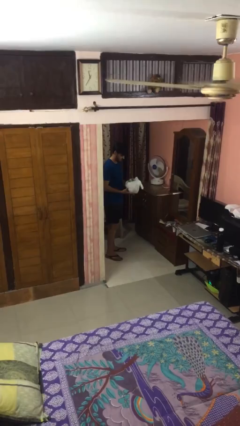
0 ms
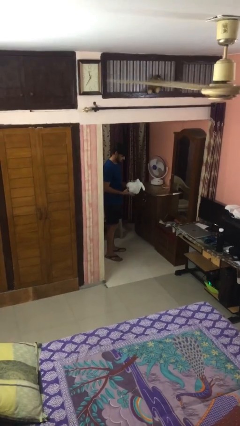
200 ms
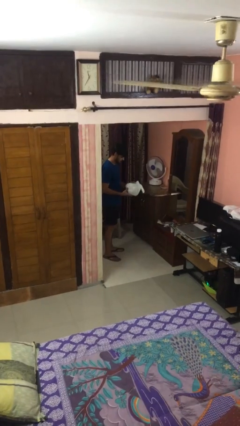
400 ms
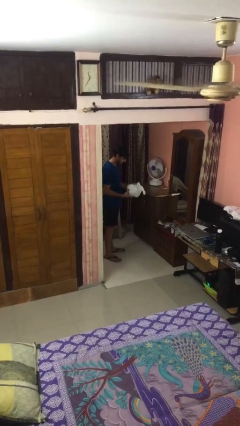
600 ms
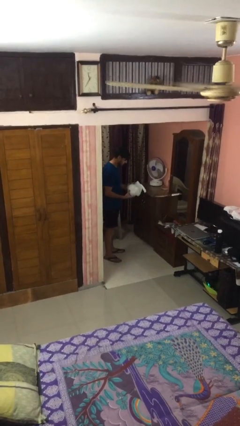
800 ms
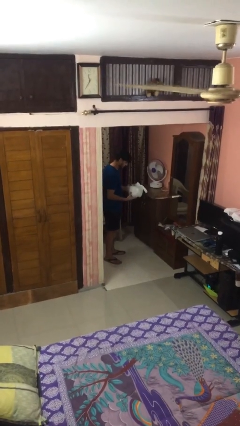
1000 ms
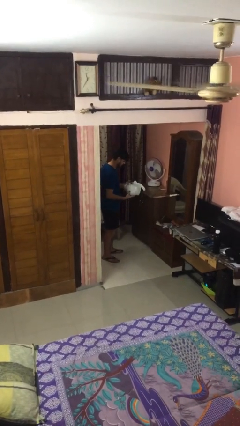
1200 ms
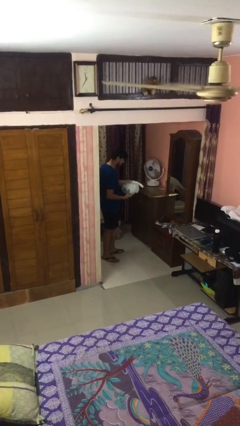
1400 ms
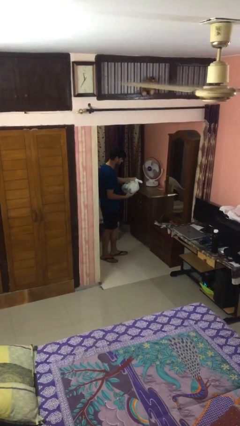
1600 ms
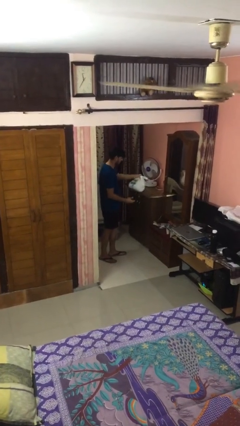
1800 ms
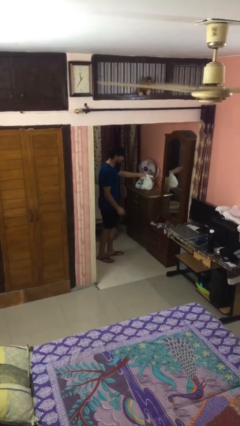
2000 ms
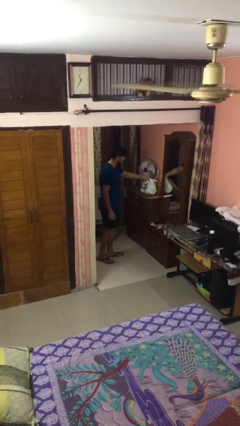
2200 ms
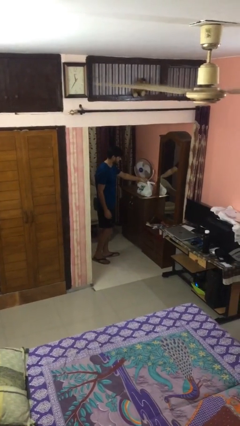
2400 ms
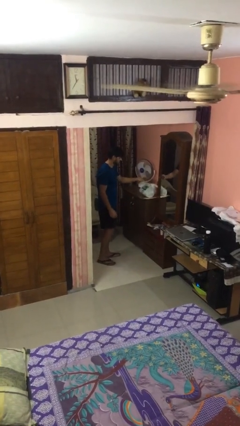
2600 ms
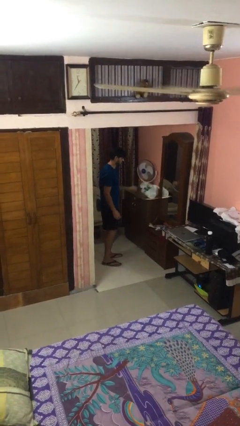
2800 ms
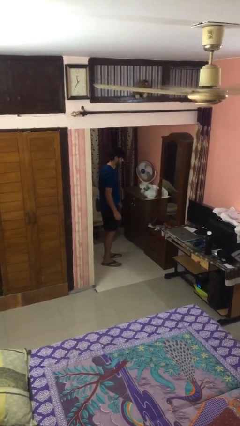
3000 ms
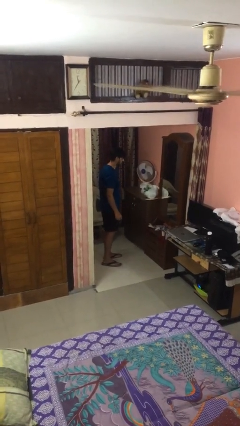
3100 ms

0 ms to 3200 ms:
person puts down object on countertop

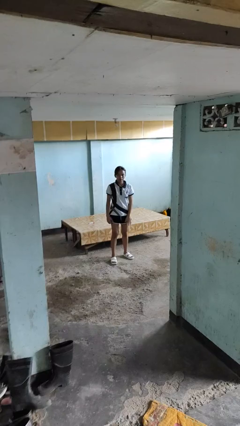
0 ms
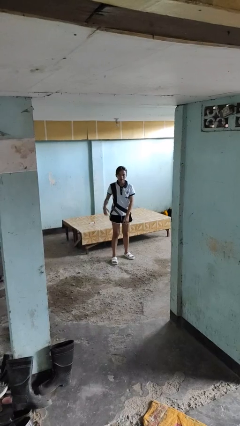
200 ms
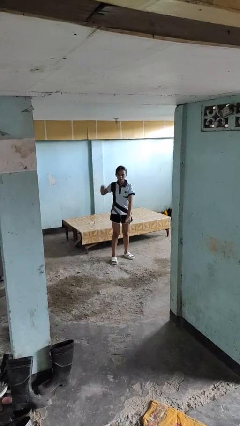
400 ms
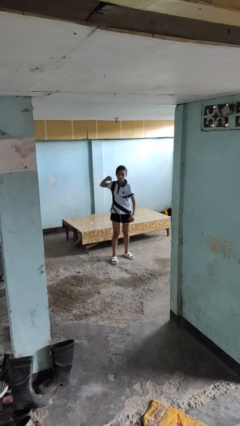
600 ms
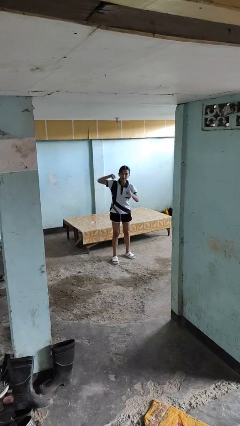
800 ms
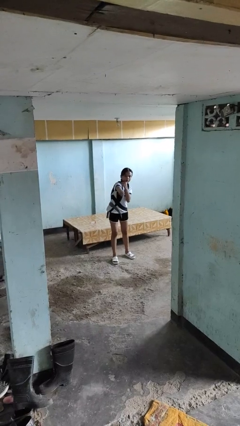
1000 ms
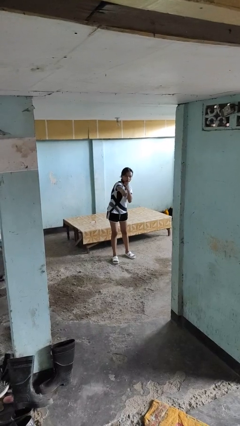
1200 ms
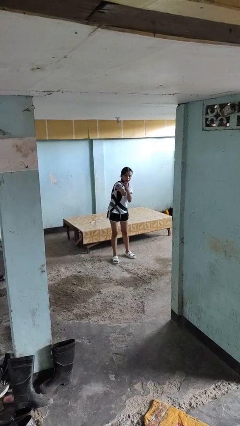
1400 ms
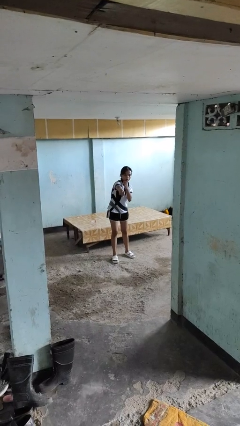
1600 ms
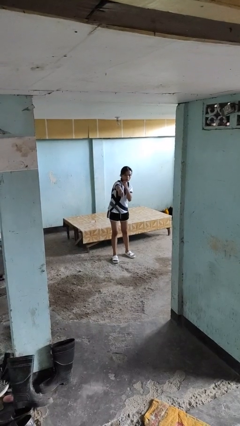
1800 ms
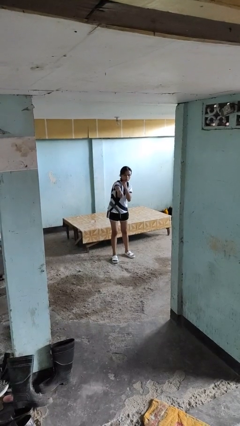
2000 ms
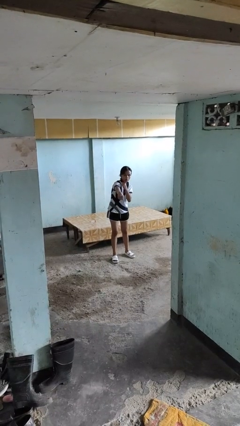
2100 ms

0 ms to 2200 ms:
person punches

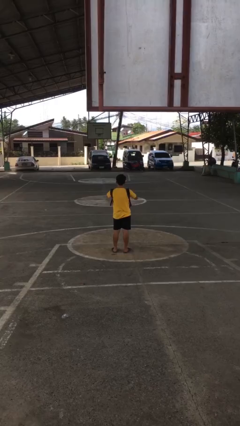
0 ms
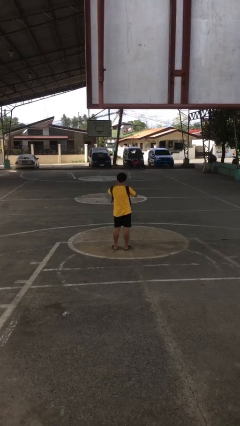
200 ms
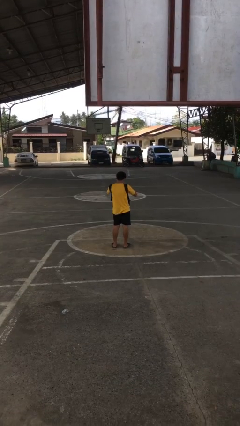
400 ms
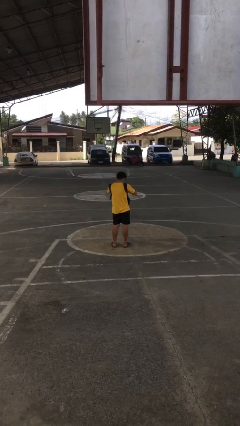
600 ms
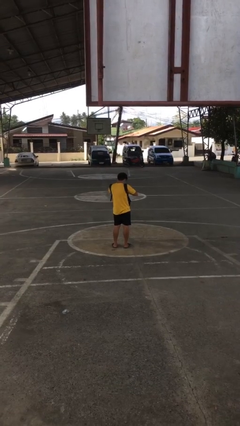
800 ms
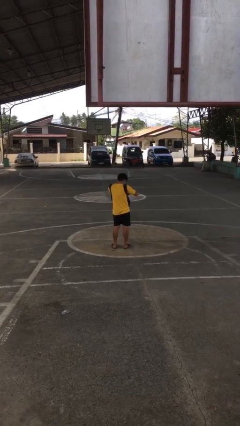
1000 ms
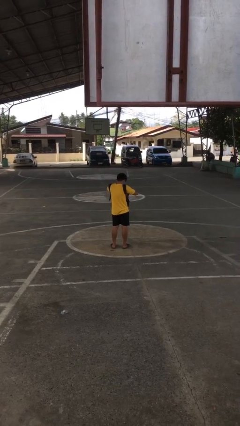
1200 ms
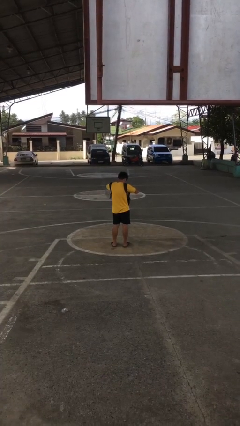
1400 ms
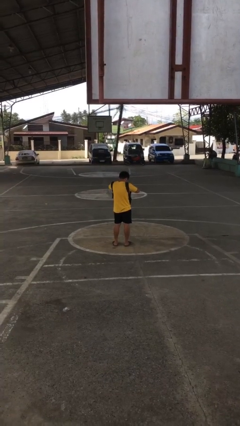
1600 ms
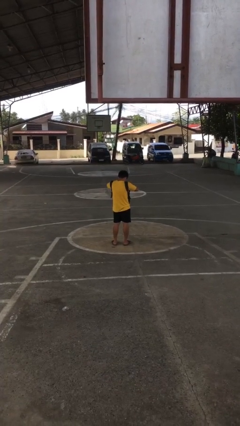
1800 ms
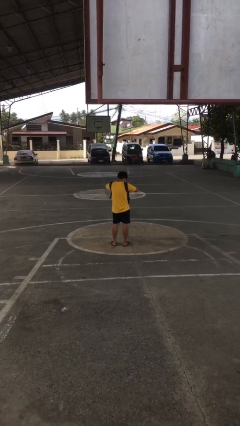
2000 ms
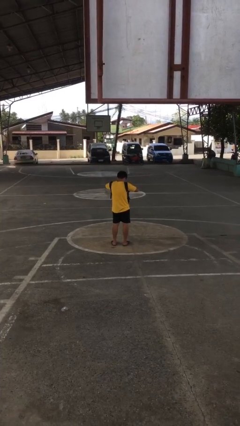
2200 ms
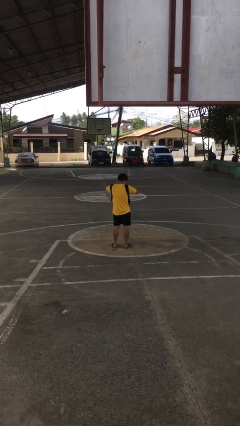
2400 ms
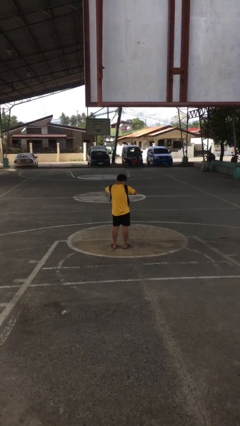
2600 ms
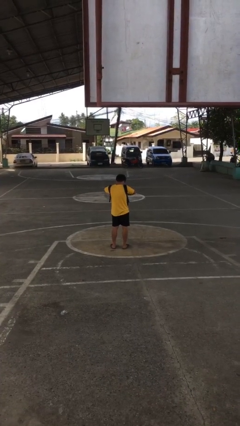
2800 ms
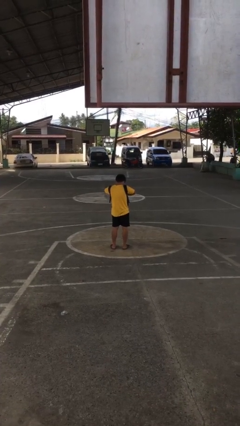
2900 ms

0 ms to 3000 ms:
person searches in backpack

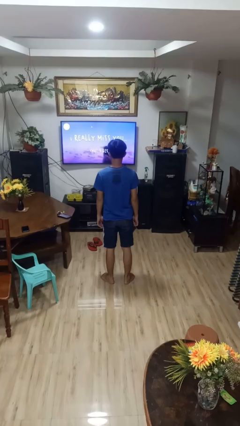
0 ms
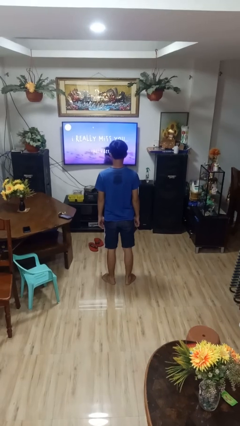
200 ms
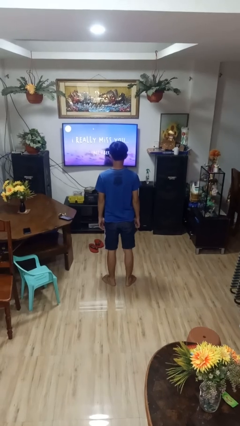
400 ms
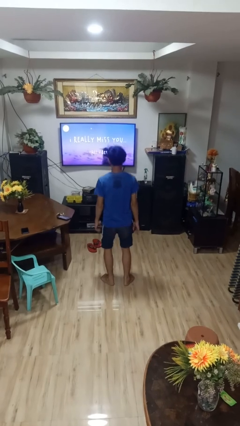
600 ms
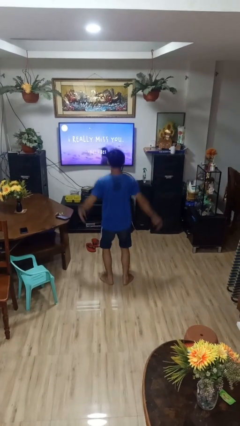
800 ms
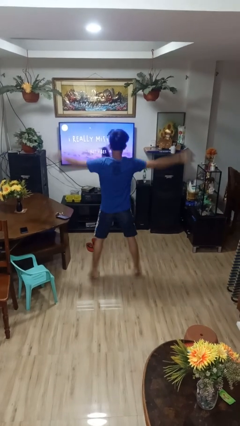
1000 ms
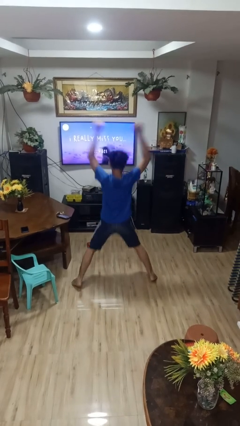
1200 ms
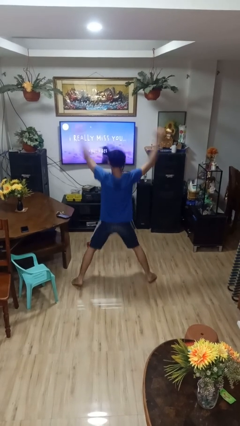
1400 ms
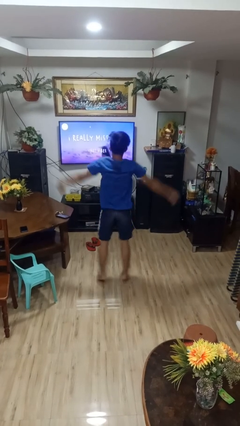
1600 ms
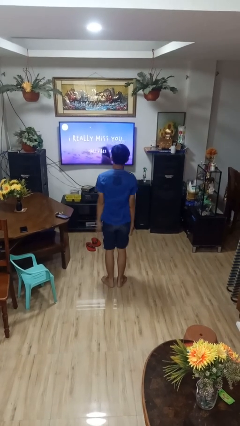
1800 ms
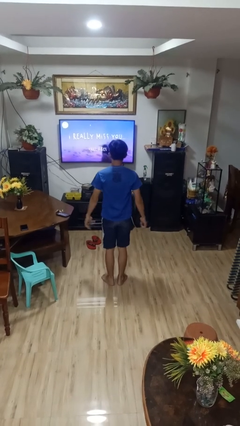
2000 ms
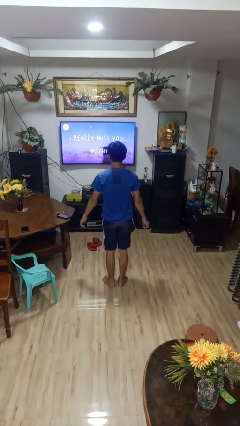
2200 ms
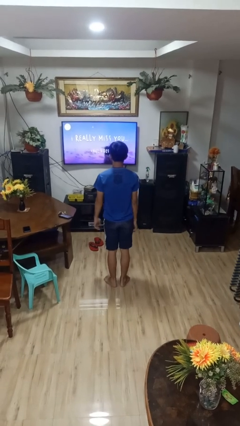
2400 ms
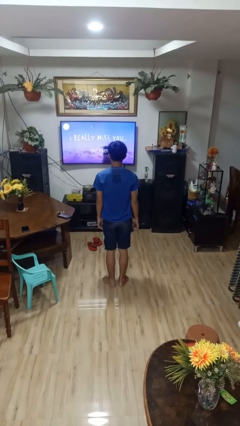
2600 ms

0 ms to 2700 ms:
person exercises with jumping jacks

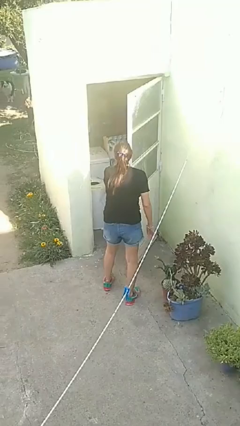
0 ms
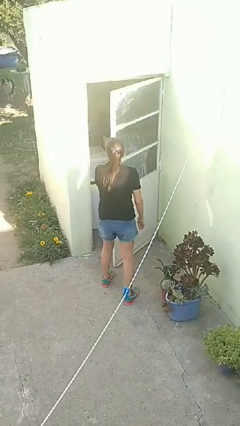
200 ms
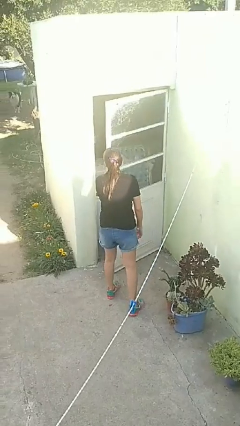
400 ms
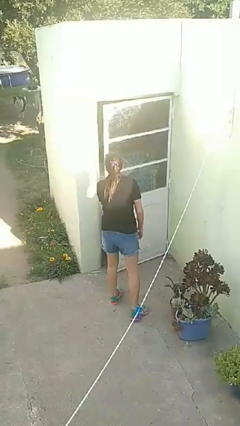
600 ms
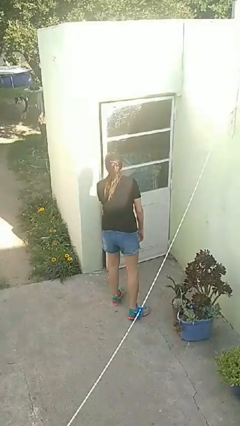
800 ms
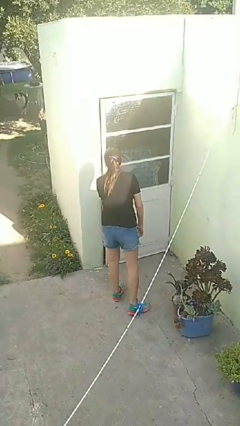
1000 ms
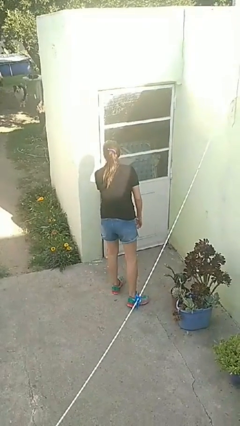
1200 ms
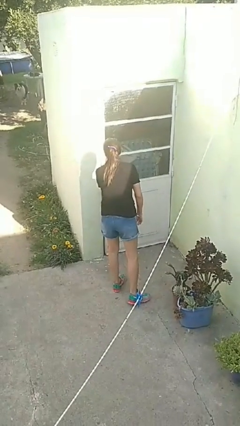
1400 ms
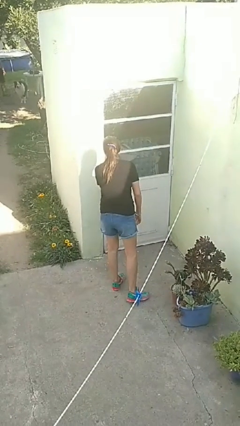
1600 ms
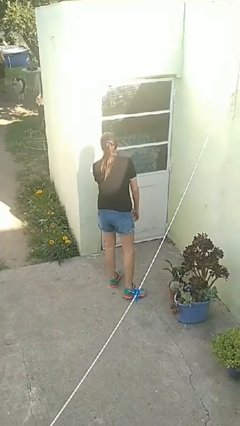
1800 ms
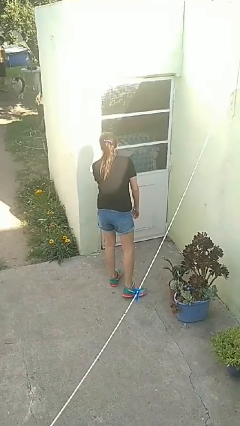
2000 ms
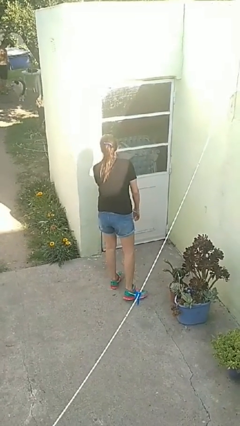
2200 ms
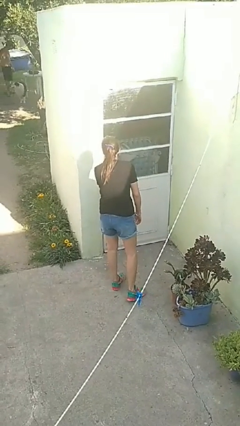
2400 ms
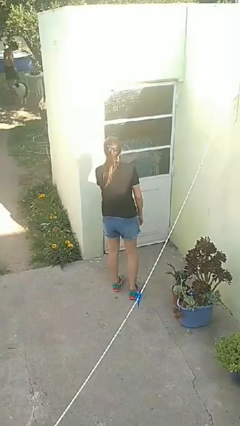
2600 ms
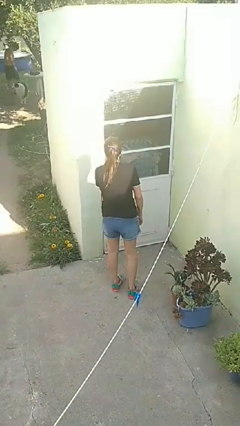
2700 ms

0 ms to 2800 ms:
person closes facility door

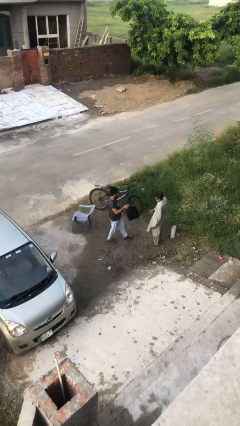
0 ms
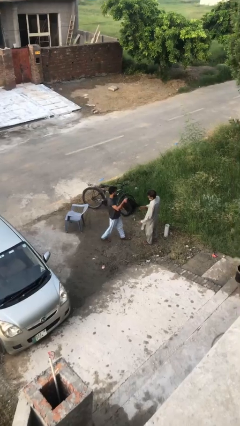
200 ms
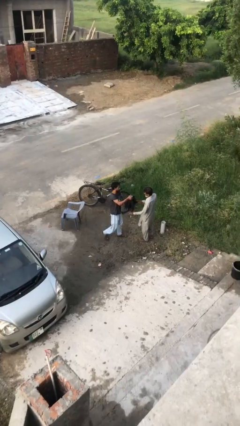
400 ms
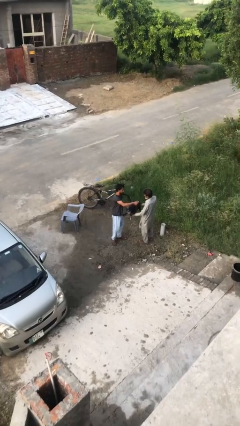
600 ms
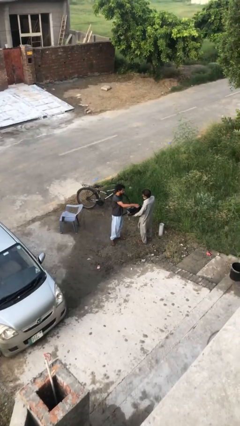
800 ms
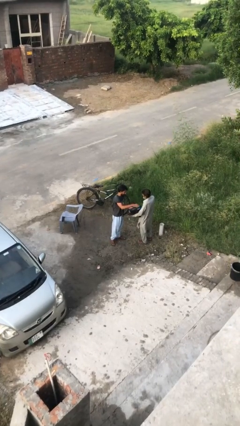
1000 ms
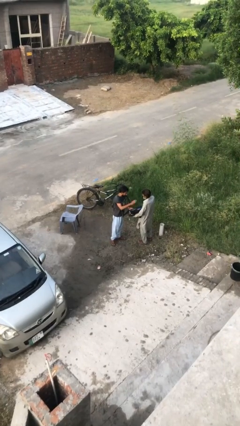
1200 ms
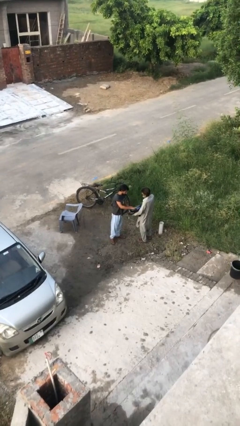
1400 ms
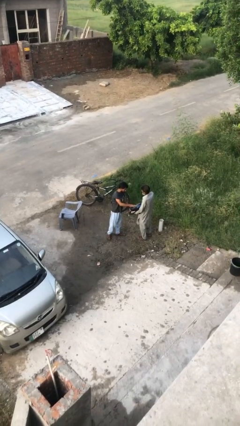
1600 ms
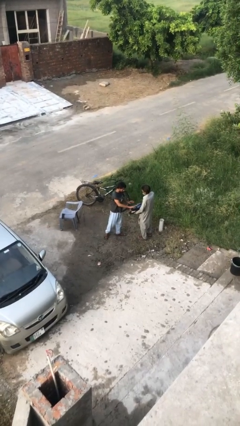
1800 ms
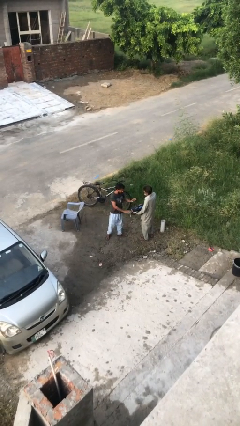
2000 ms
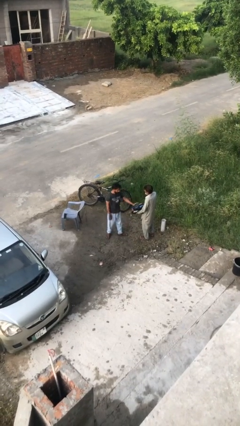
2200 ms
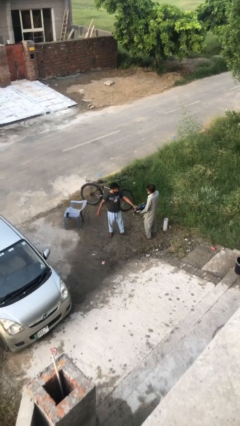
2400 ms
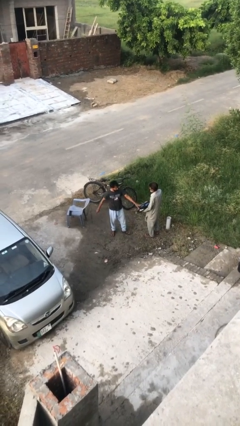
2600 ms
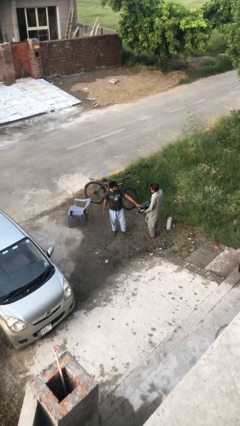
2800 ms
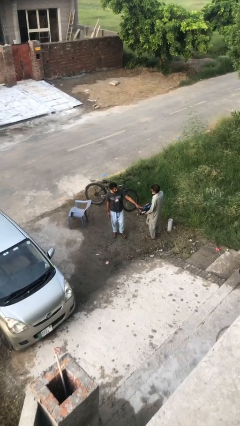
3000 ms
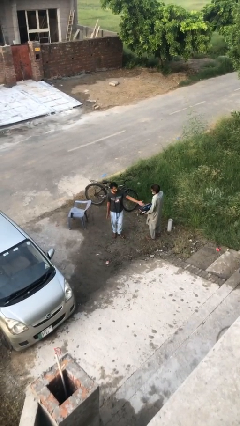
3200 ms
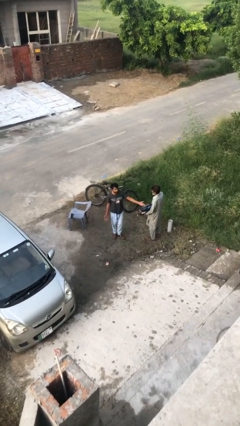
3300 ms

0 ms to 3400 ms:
person transfers object to person

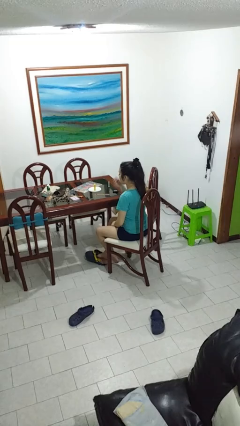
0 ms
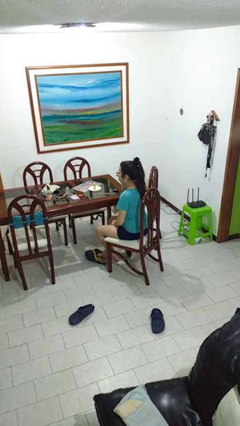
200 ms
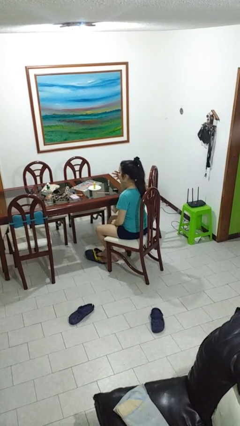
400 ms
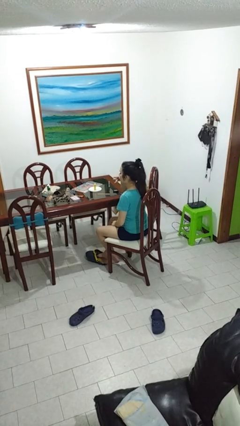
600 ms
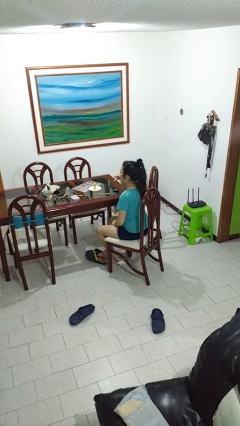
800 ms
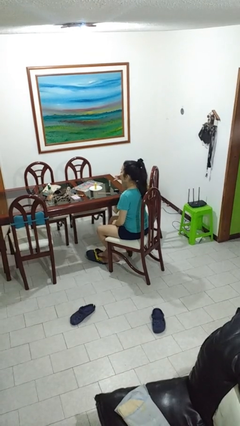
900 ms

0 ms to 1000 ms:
person licks fingers
